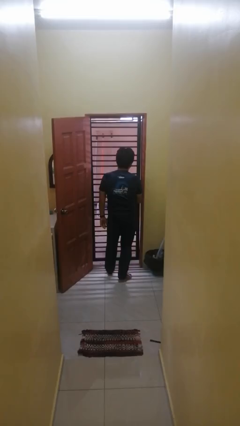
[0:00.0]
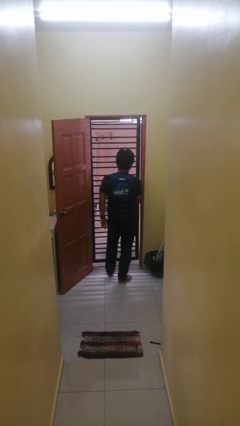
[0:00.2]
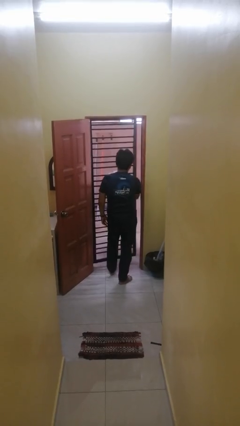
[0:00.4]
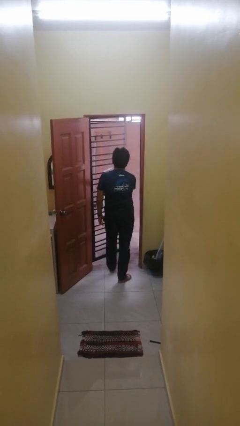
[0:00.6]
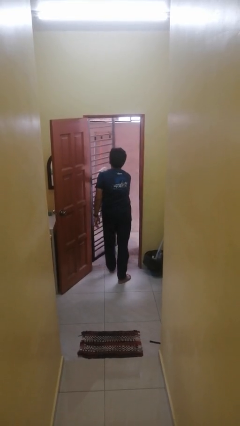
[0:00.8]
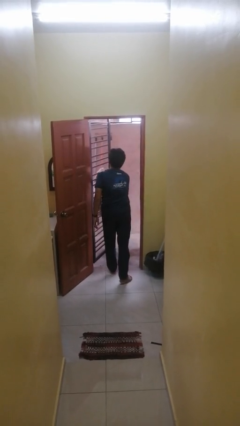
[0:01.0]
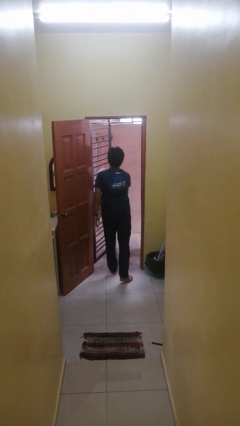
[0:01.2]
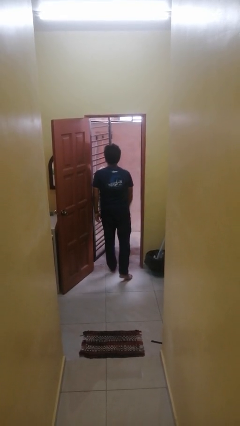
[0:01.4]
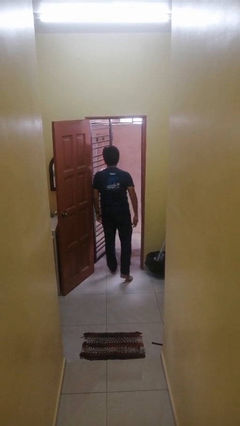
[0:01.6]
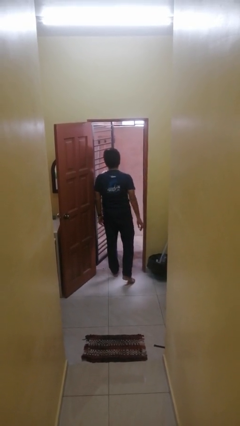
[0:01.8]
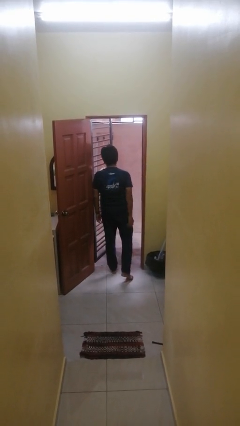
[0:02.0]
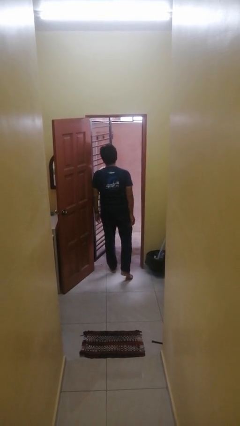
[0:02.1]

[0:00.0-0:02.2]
person opens gate

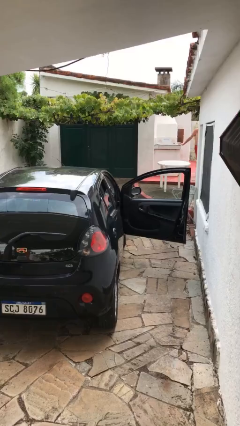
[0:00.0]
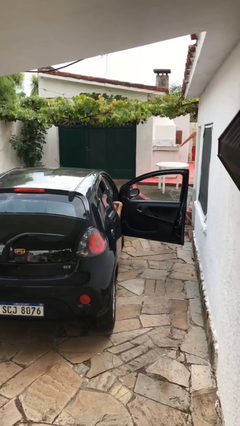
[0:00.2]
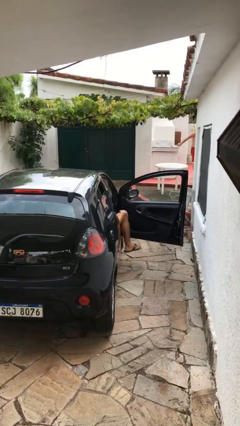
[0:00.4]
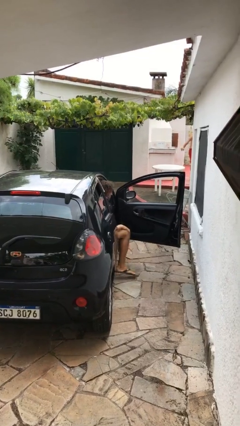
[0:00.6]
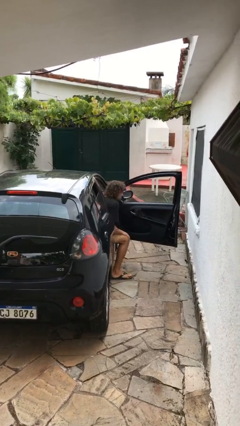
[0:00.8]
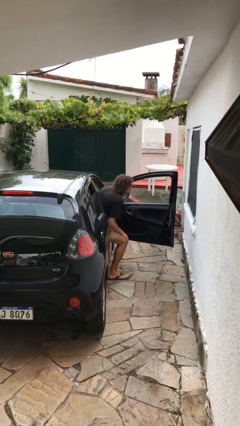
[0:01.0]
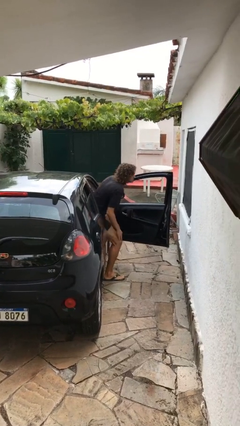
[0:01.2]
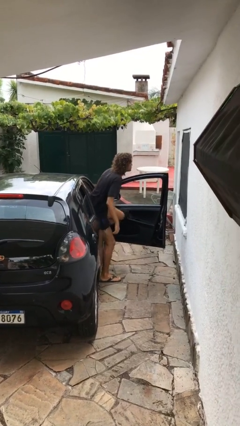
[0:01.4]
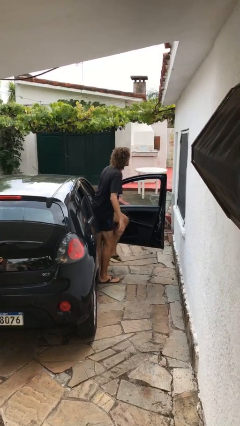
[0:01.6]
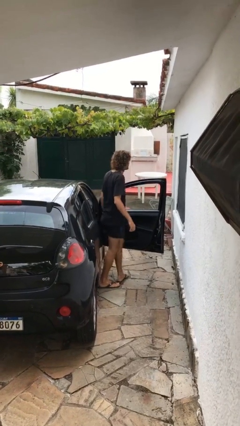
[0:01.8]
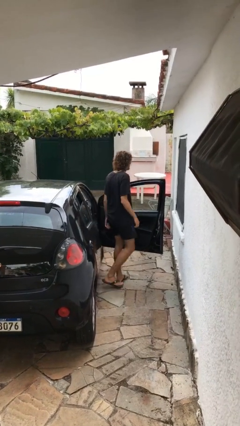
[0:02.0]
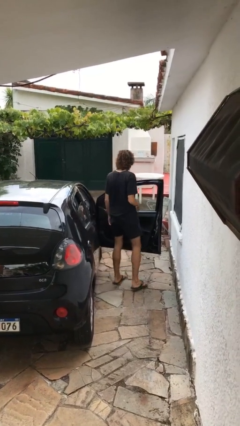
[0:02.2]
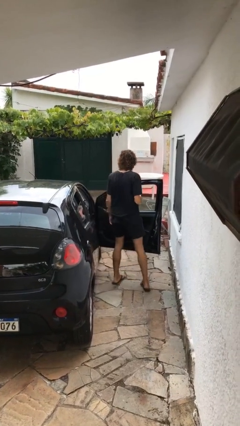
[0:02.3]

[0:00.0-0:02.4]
person exits car

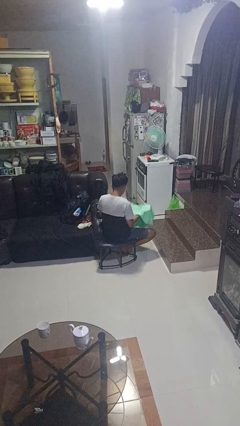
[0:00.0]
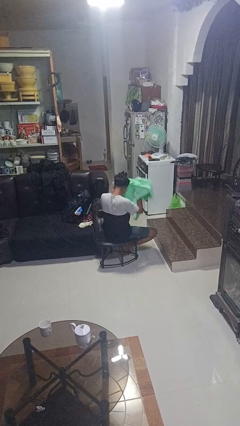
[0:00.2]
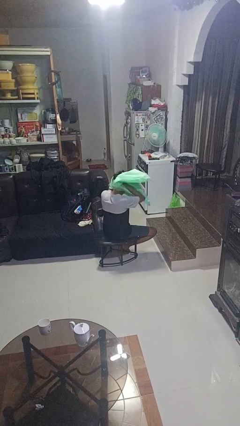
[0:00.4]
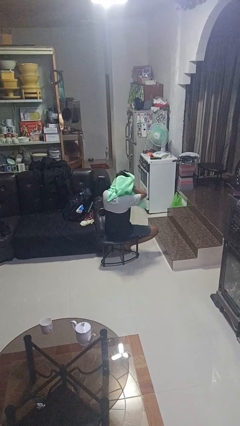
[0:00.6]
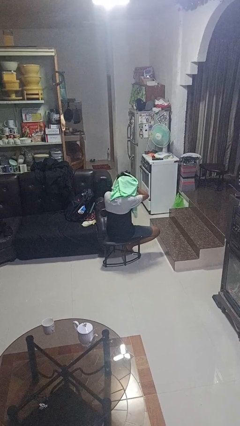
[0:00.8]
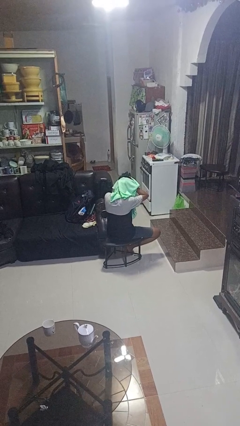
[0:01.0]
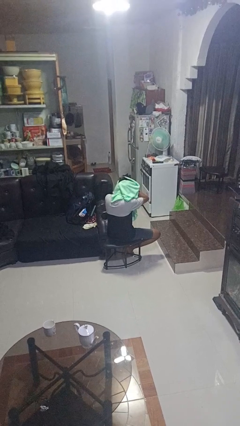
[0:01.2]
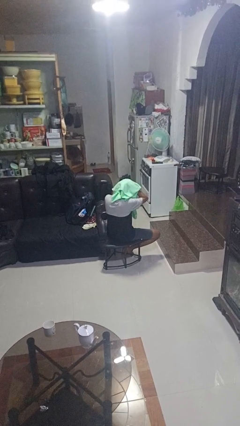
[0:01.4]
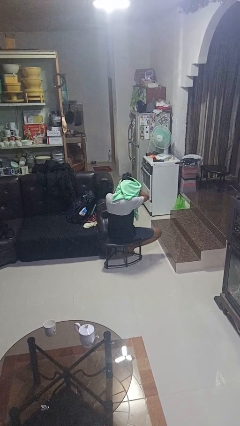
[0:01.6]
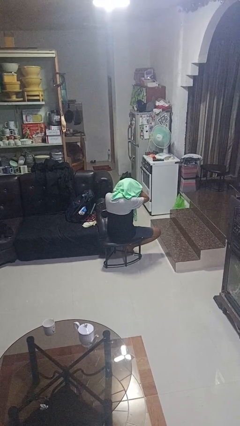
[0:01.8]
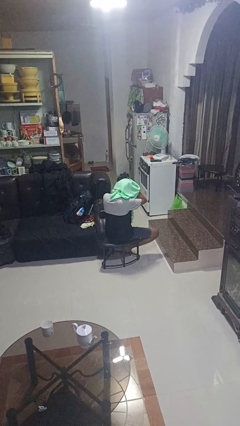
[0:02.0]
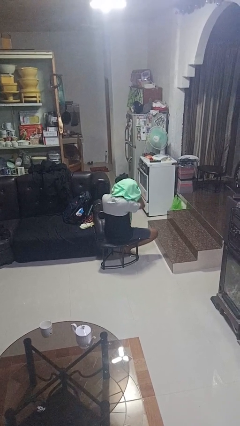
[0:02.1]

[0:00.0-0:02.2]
person dries hair with towel

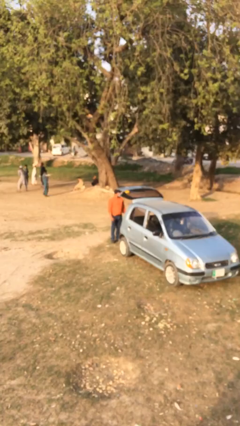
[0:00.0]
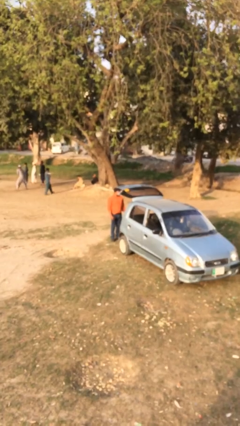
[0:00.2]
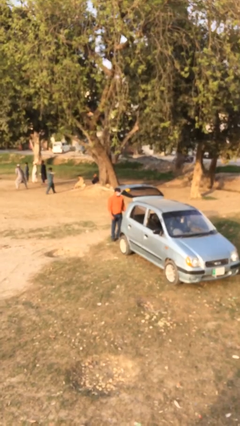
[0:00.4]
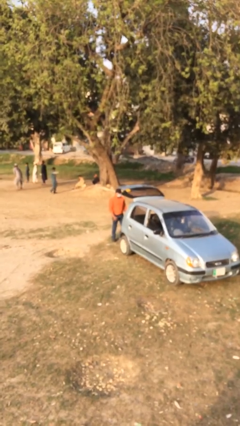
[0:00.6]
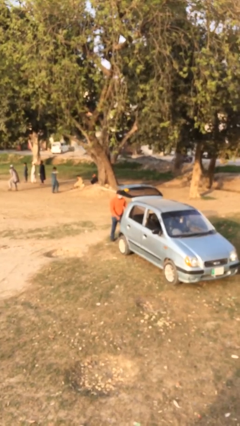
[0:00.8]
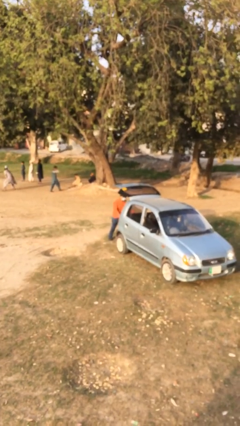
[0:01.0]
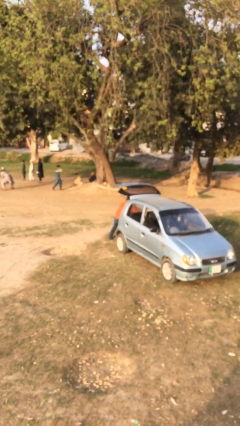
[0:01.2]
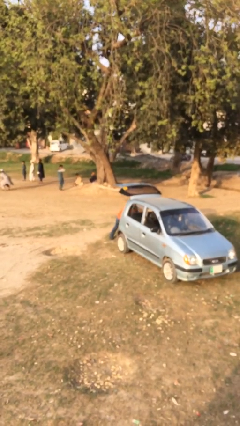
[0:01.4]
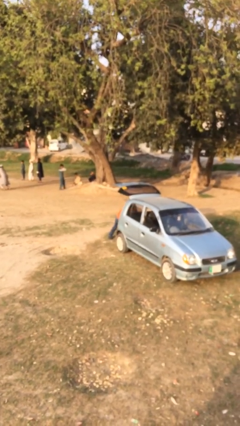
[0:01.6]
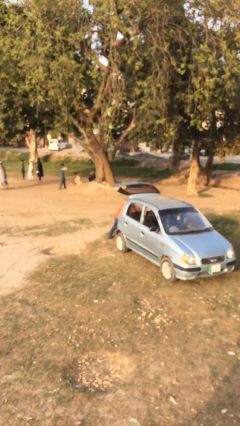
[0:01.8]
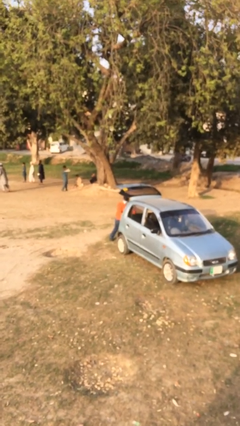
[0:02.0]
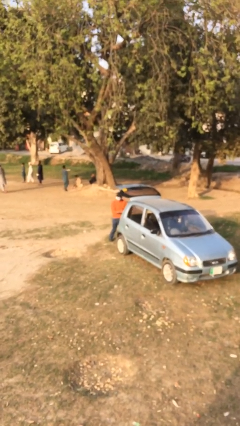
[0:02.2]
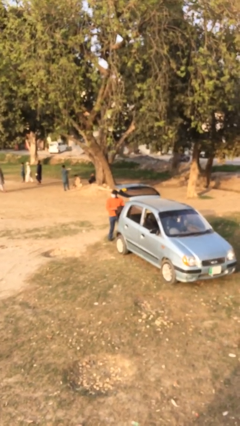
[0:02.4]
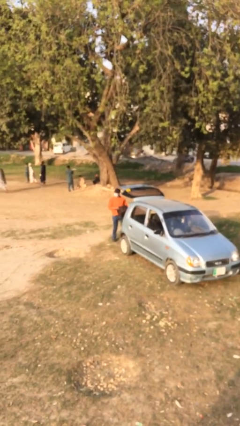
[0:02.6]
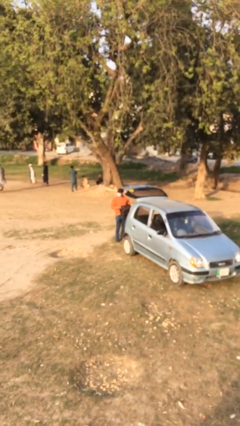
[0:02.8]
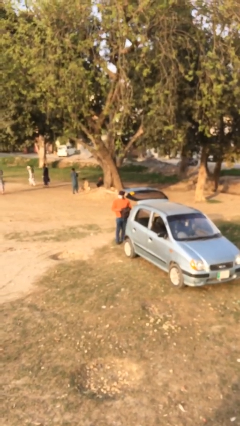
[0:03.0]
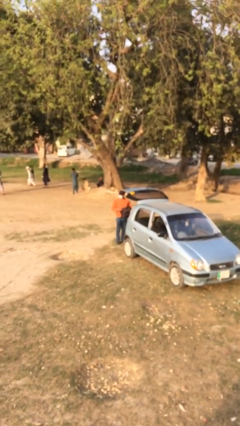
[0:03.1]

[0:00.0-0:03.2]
person unloads car

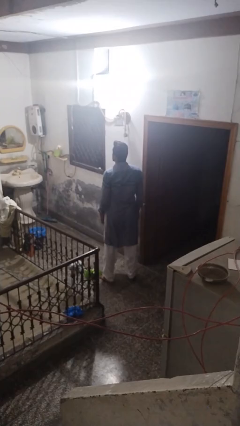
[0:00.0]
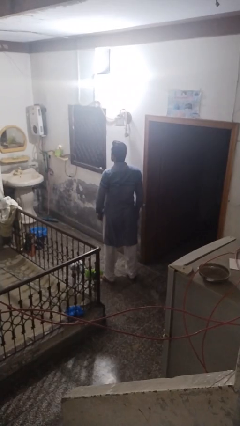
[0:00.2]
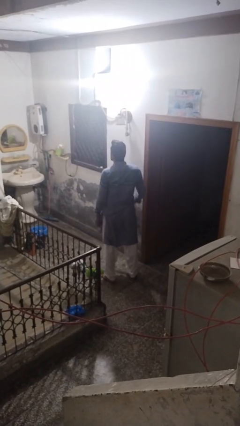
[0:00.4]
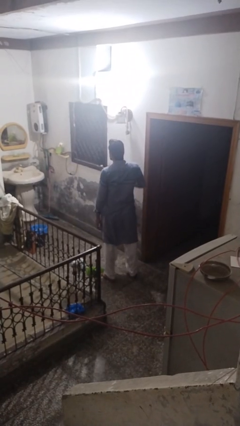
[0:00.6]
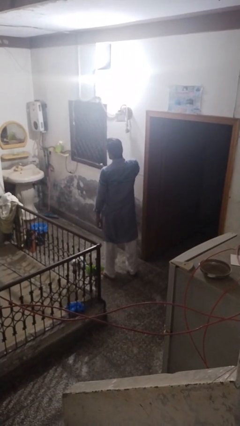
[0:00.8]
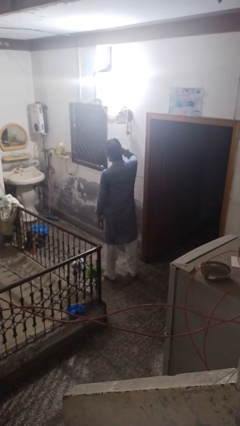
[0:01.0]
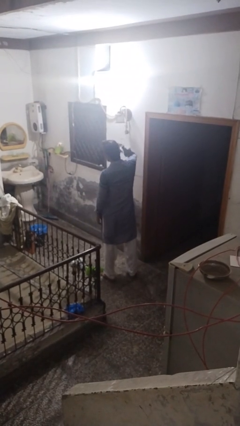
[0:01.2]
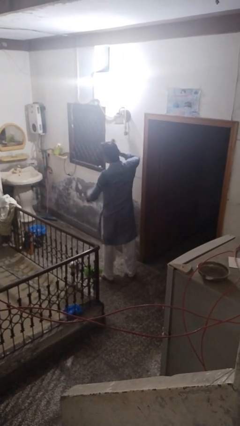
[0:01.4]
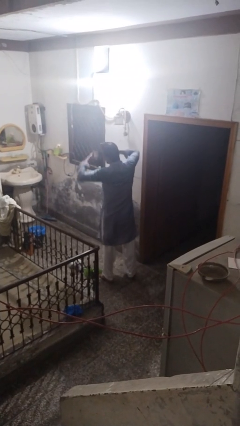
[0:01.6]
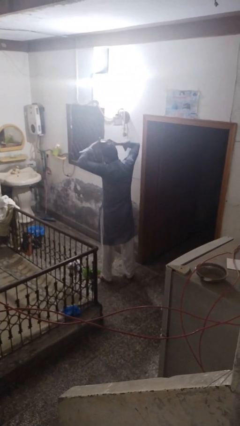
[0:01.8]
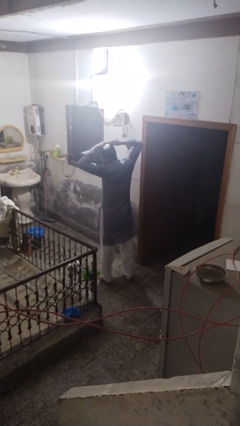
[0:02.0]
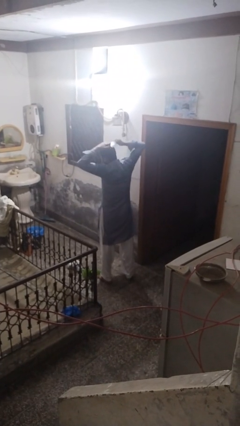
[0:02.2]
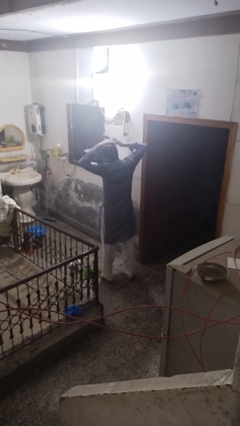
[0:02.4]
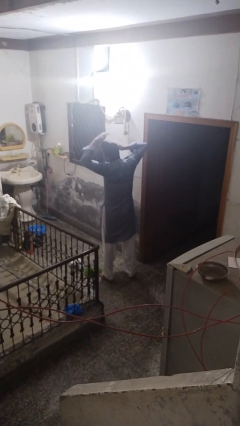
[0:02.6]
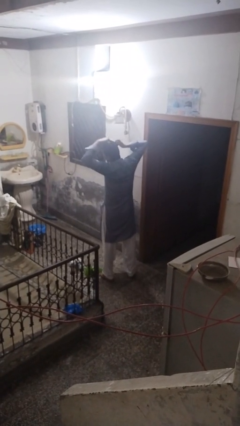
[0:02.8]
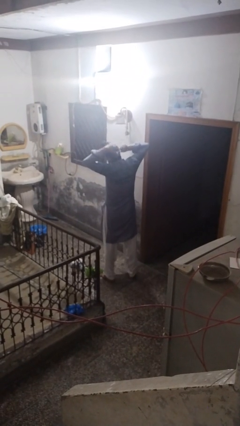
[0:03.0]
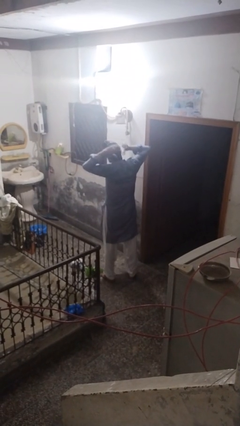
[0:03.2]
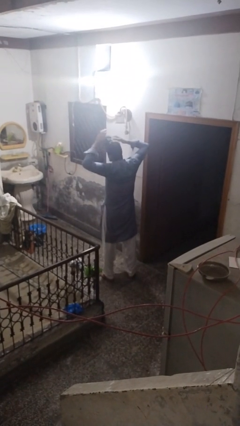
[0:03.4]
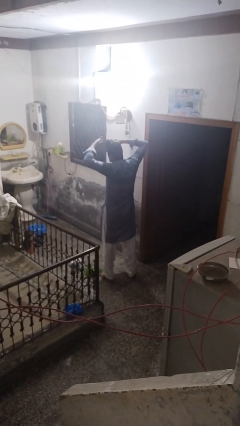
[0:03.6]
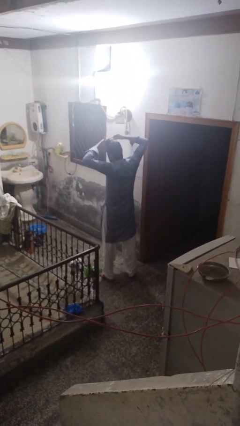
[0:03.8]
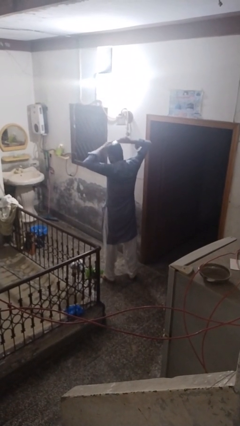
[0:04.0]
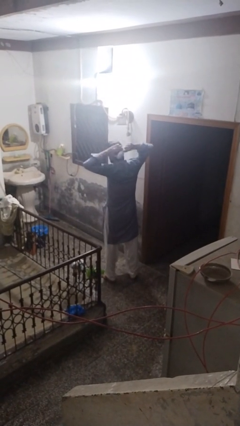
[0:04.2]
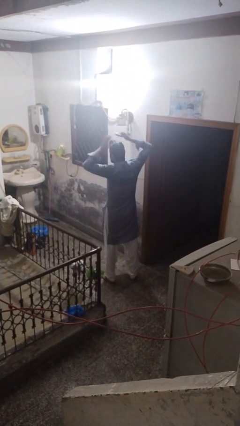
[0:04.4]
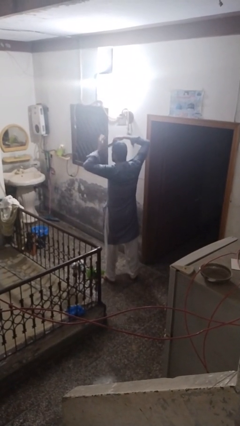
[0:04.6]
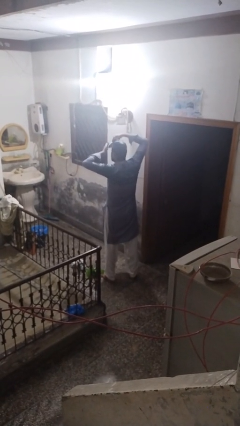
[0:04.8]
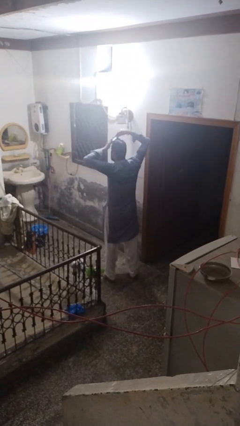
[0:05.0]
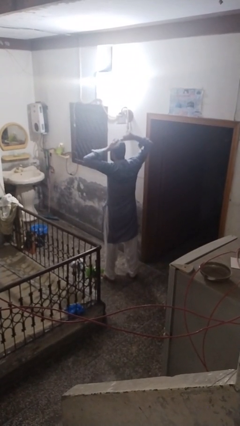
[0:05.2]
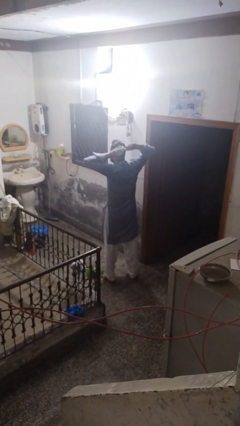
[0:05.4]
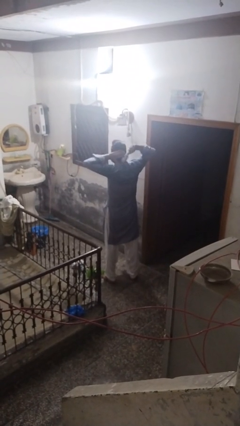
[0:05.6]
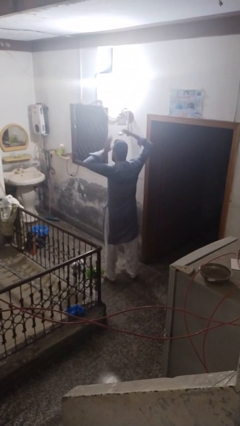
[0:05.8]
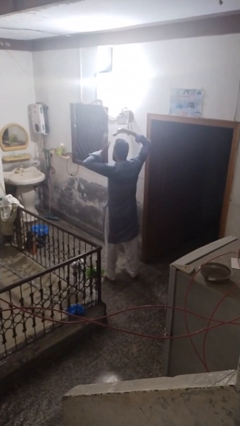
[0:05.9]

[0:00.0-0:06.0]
person brushes hair

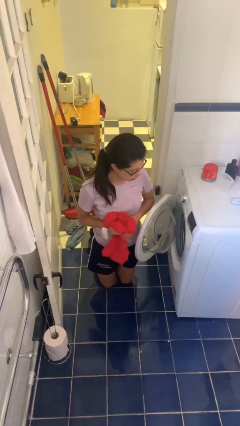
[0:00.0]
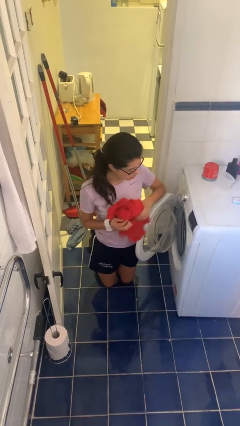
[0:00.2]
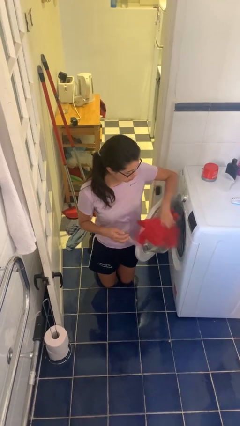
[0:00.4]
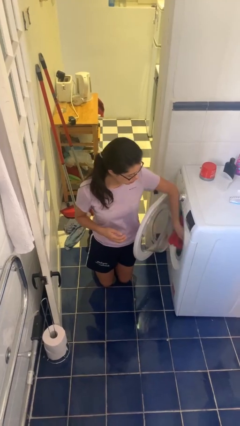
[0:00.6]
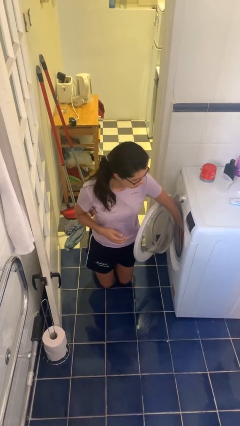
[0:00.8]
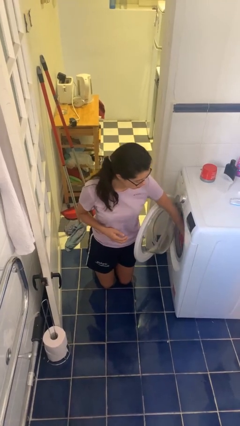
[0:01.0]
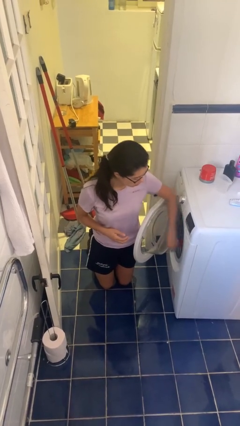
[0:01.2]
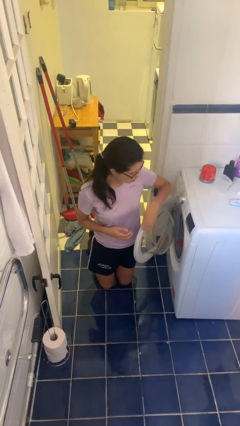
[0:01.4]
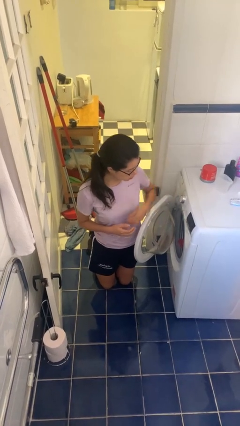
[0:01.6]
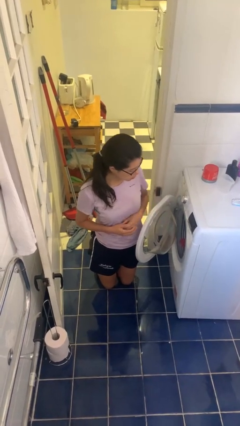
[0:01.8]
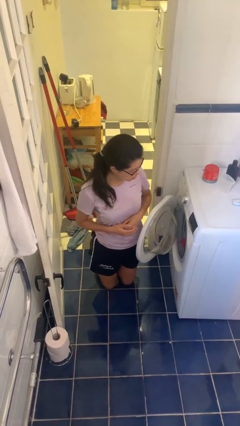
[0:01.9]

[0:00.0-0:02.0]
person loads dryer
